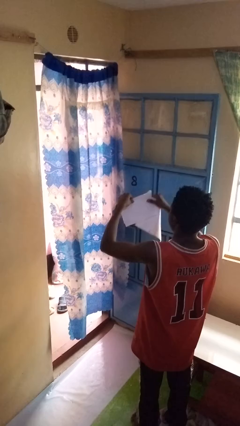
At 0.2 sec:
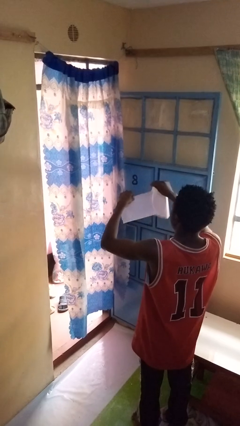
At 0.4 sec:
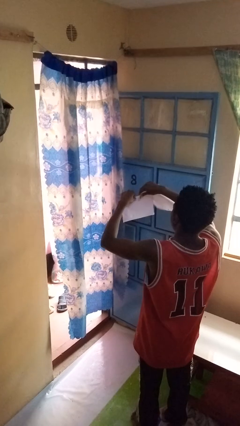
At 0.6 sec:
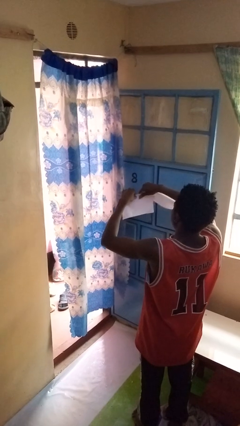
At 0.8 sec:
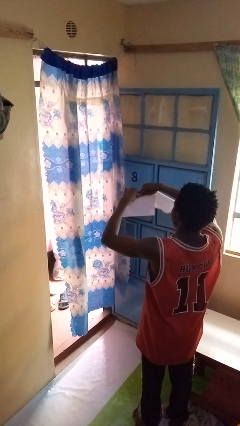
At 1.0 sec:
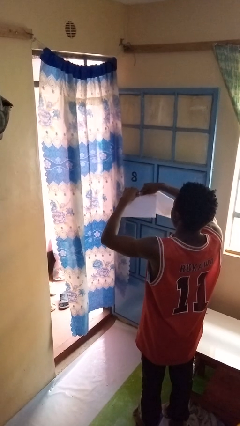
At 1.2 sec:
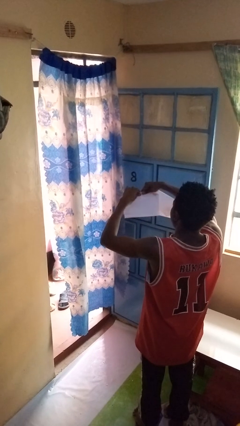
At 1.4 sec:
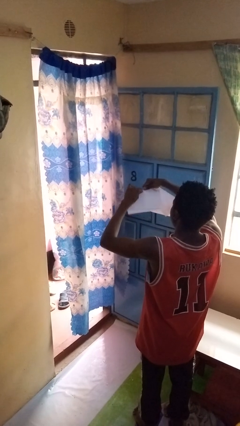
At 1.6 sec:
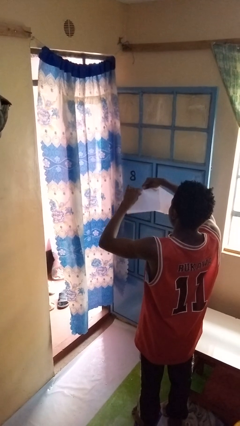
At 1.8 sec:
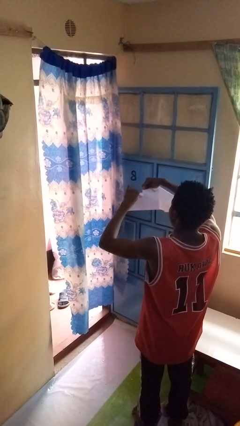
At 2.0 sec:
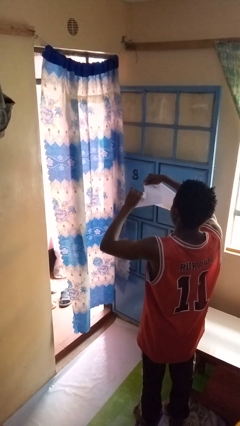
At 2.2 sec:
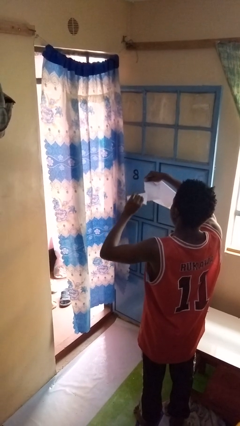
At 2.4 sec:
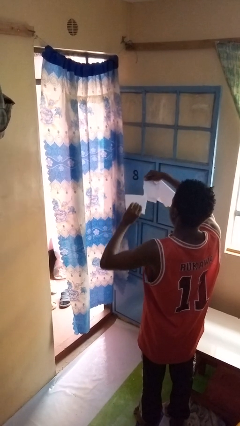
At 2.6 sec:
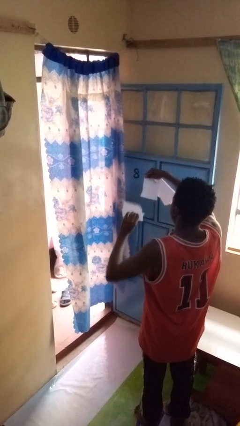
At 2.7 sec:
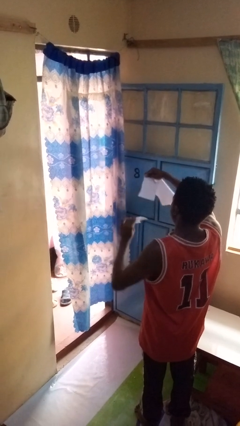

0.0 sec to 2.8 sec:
person tears paper

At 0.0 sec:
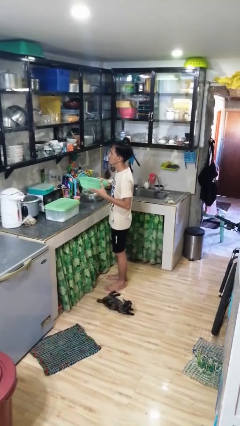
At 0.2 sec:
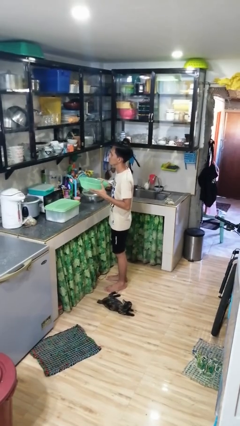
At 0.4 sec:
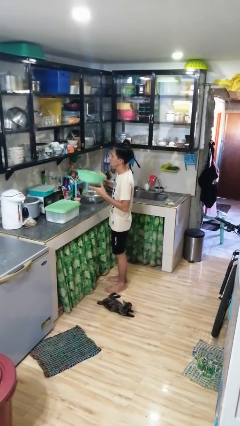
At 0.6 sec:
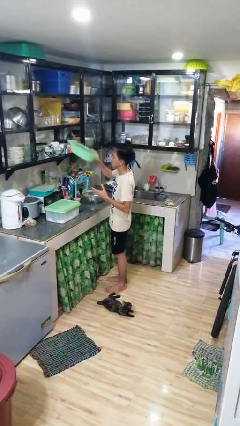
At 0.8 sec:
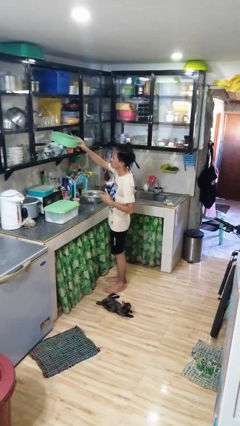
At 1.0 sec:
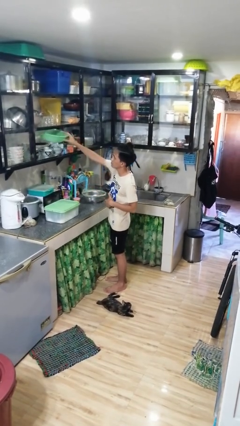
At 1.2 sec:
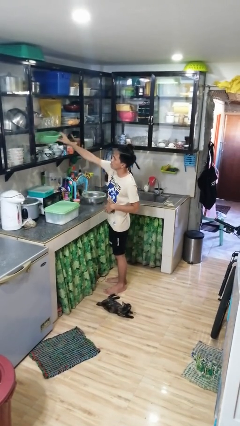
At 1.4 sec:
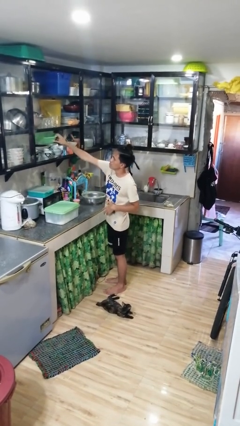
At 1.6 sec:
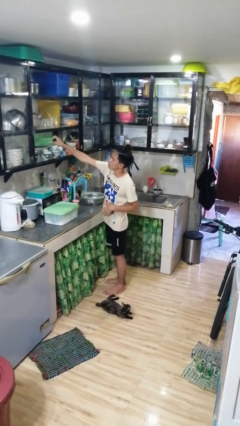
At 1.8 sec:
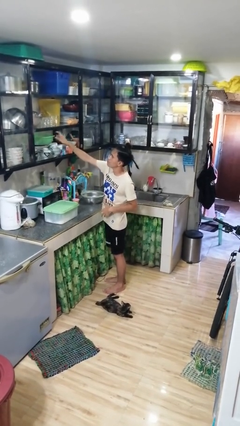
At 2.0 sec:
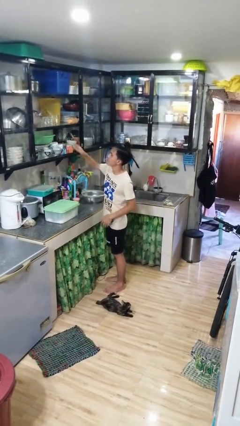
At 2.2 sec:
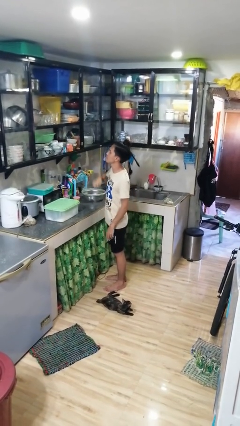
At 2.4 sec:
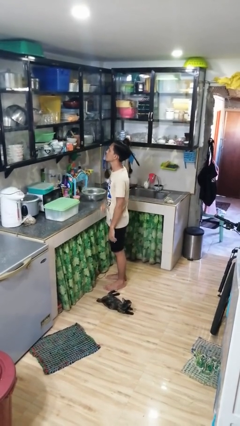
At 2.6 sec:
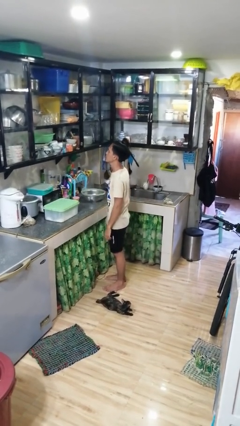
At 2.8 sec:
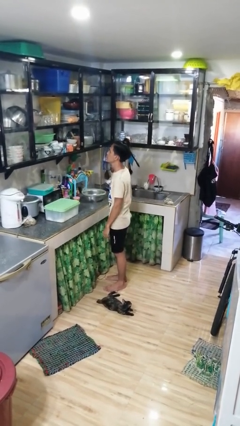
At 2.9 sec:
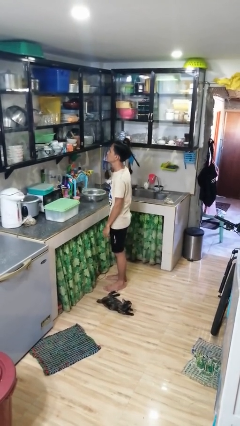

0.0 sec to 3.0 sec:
person puts down object into cabinet

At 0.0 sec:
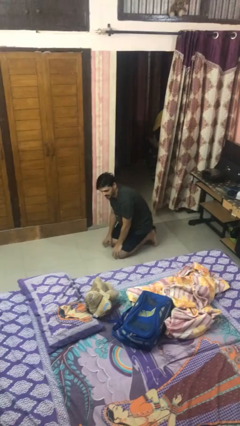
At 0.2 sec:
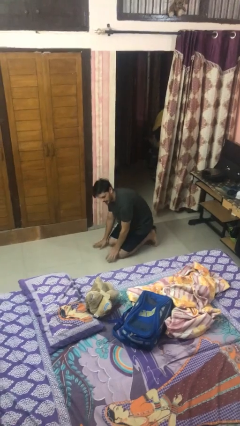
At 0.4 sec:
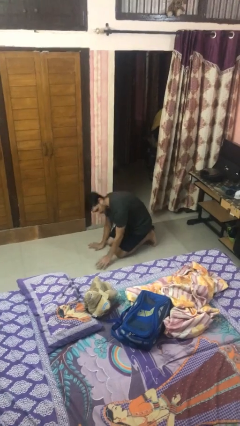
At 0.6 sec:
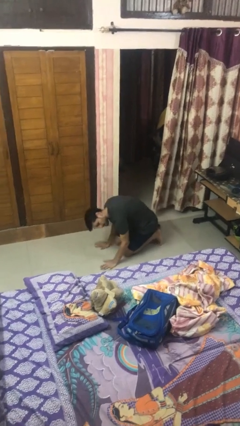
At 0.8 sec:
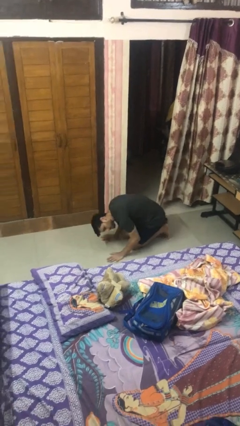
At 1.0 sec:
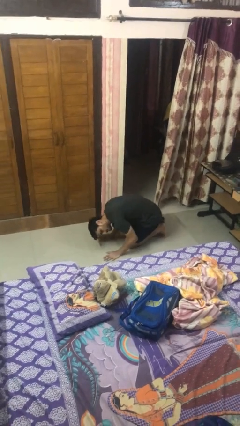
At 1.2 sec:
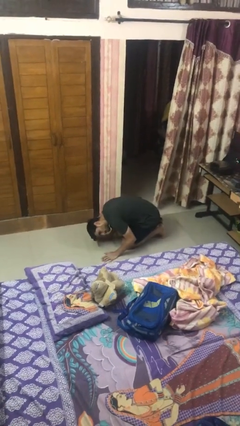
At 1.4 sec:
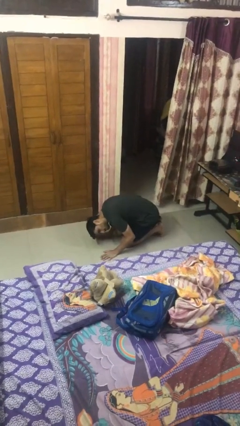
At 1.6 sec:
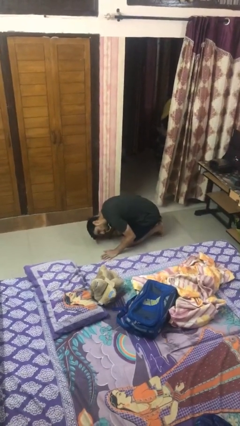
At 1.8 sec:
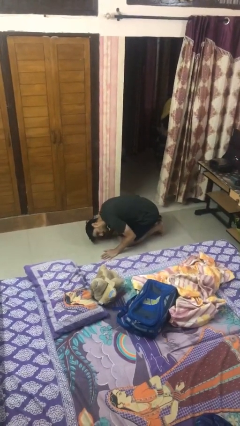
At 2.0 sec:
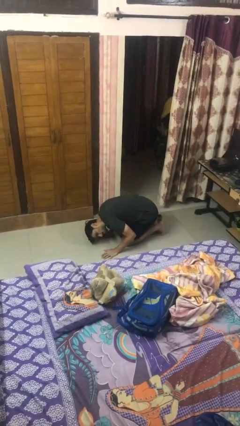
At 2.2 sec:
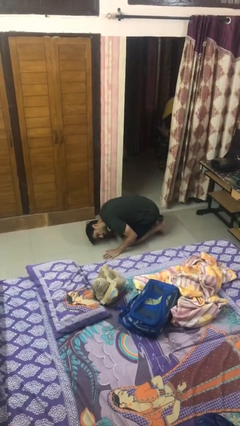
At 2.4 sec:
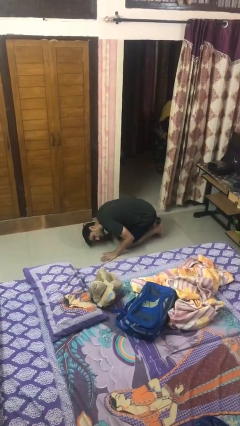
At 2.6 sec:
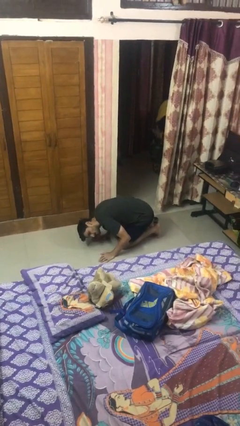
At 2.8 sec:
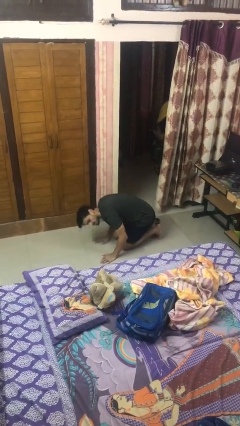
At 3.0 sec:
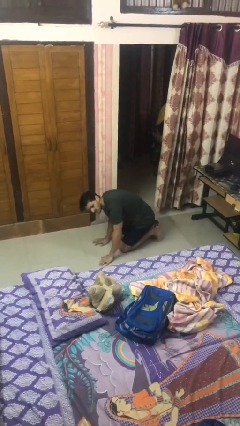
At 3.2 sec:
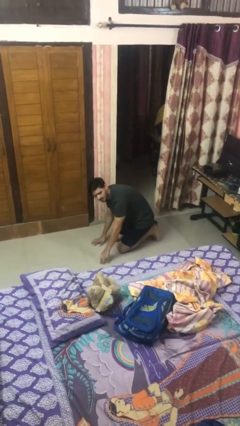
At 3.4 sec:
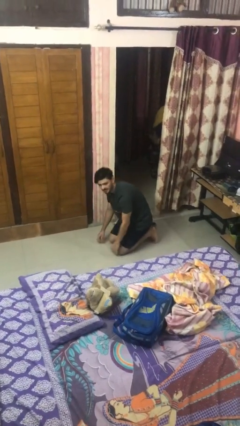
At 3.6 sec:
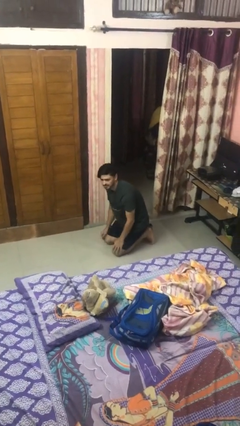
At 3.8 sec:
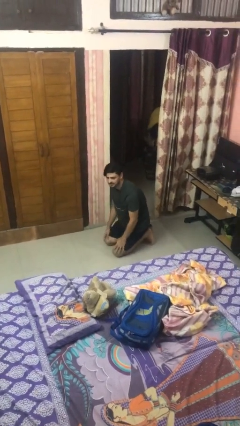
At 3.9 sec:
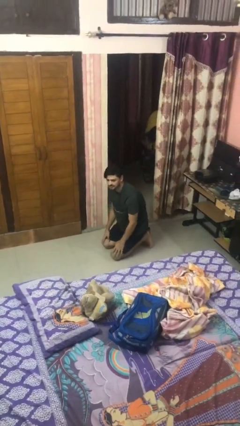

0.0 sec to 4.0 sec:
person searches under bed

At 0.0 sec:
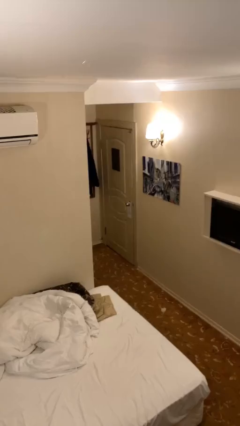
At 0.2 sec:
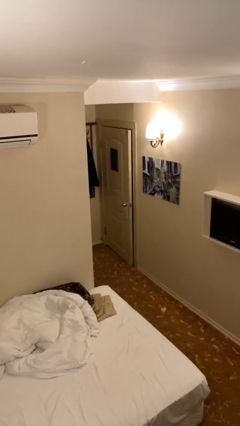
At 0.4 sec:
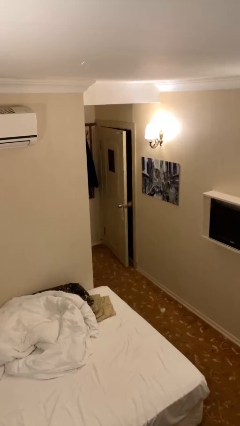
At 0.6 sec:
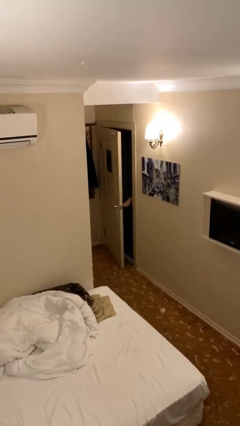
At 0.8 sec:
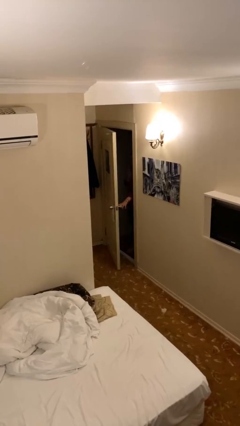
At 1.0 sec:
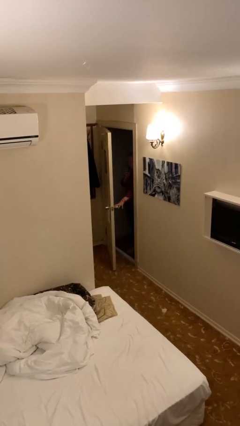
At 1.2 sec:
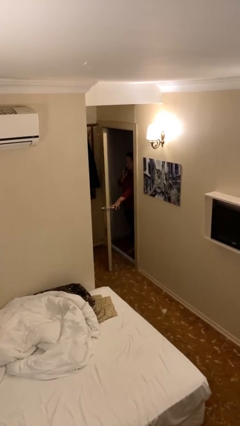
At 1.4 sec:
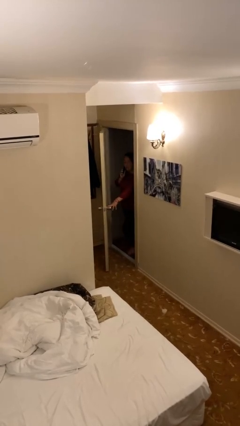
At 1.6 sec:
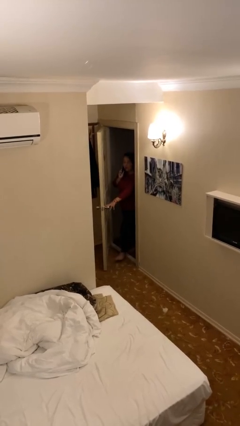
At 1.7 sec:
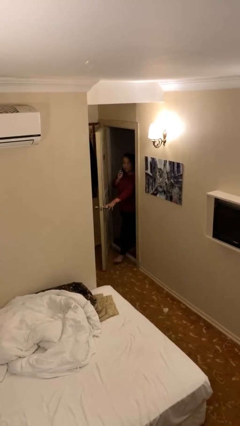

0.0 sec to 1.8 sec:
person opens facility door

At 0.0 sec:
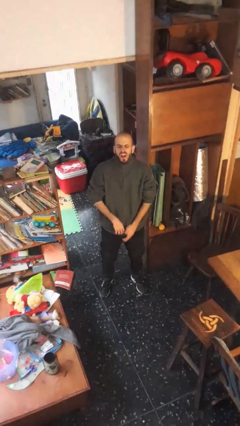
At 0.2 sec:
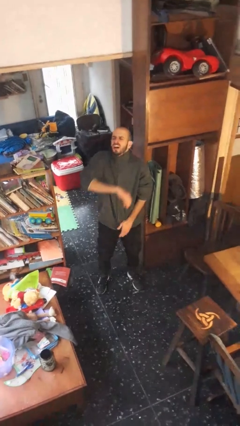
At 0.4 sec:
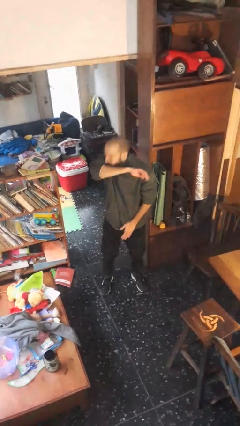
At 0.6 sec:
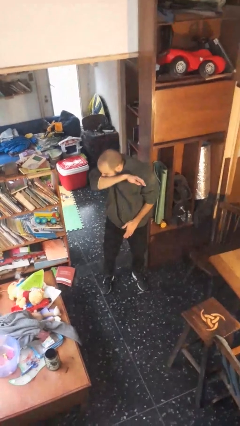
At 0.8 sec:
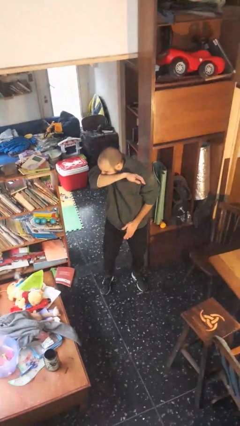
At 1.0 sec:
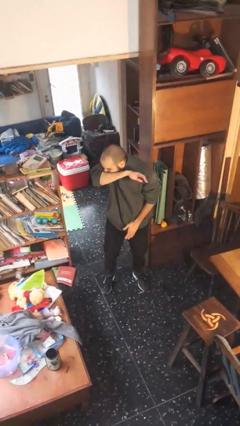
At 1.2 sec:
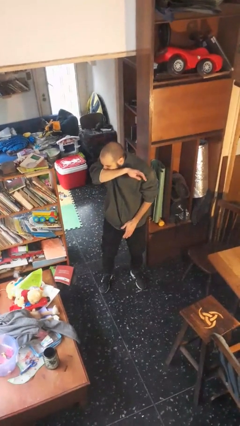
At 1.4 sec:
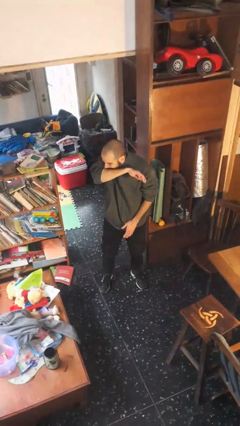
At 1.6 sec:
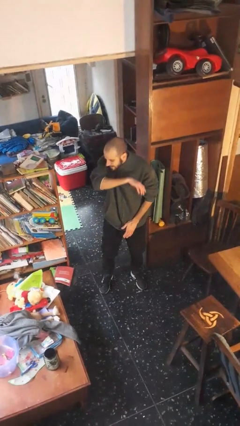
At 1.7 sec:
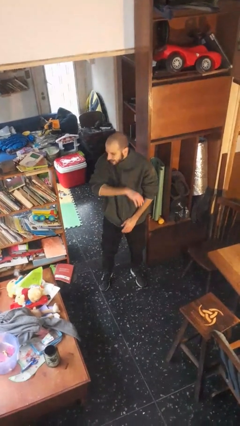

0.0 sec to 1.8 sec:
person sneezes into arm

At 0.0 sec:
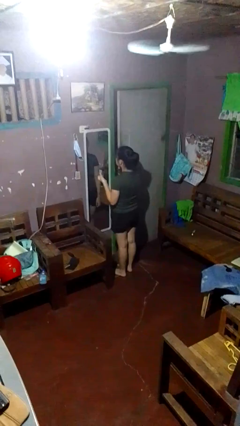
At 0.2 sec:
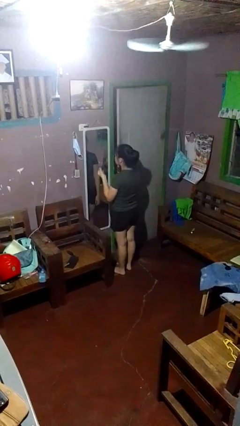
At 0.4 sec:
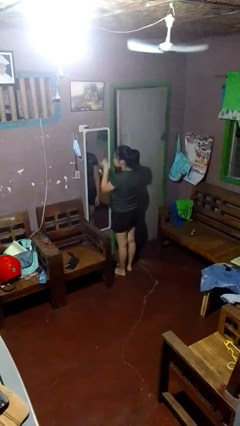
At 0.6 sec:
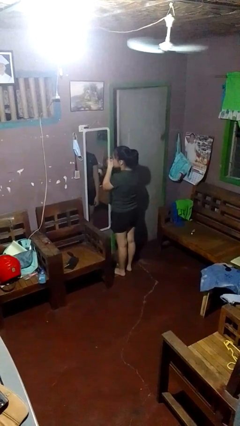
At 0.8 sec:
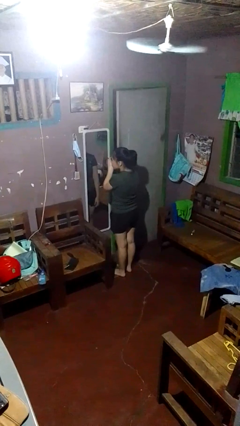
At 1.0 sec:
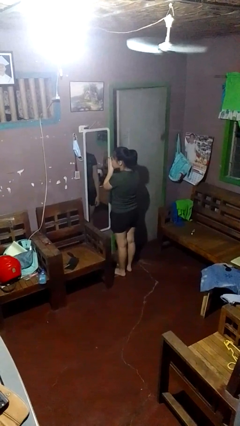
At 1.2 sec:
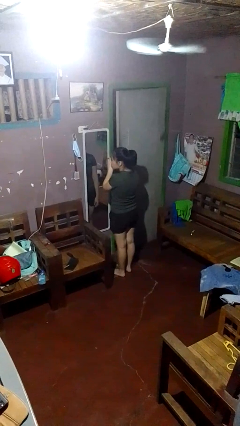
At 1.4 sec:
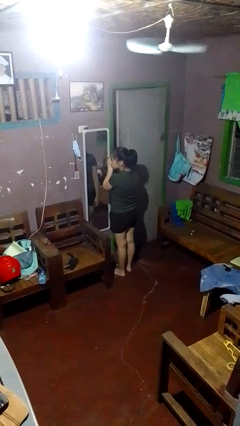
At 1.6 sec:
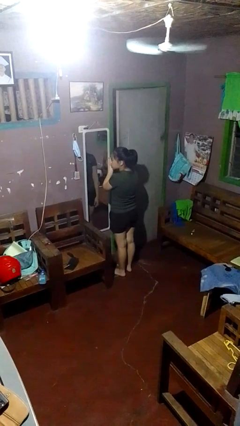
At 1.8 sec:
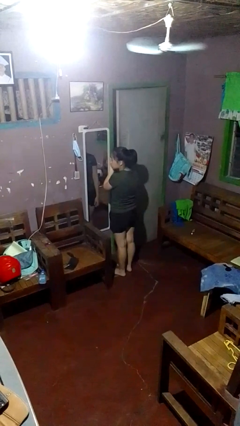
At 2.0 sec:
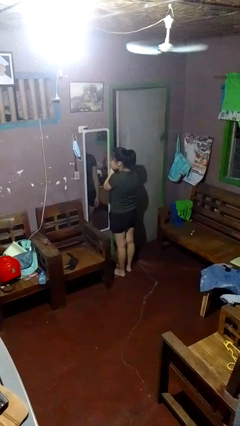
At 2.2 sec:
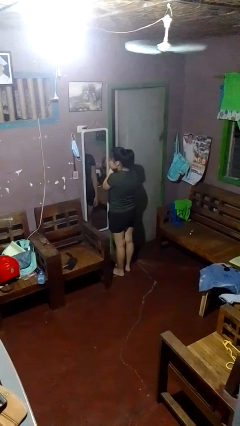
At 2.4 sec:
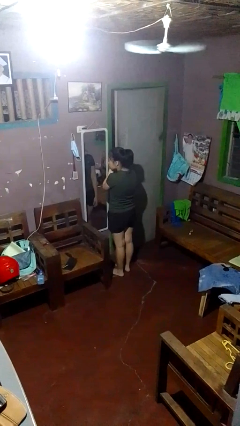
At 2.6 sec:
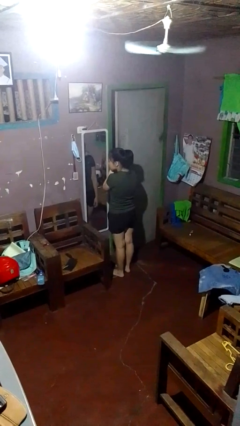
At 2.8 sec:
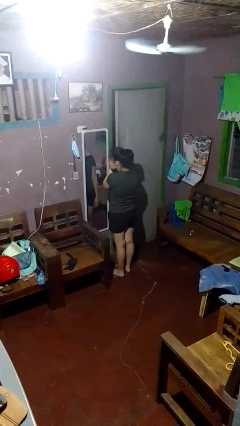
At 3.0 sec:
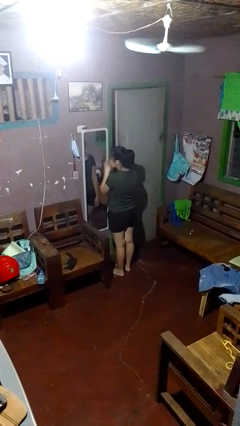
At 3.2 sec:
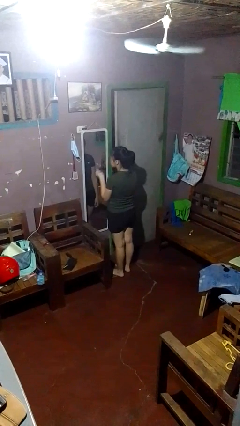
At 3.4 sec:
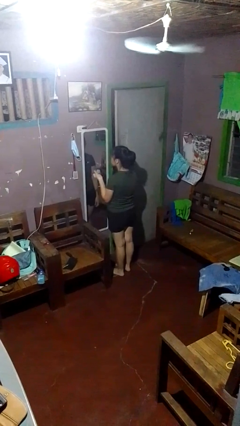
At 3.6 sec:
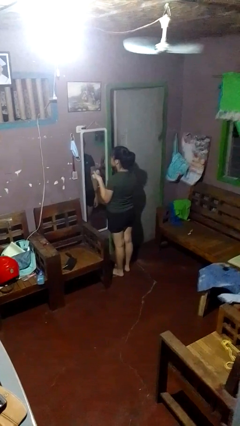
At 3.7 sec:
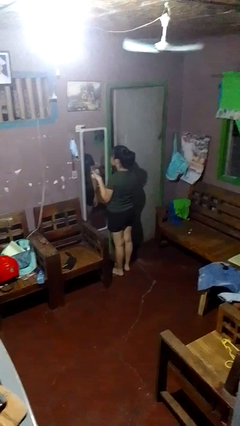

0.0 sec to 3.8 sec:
person applies eye makeup
